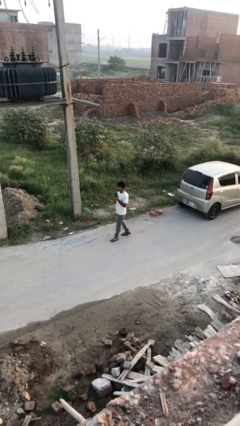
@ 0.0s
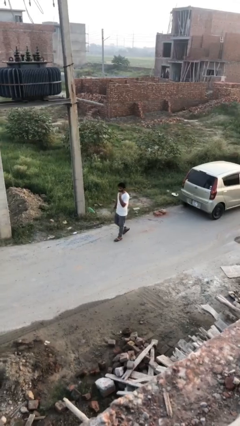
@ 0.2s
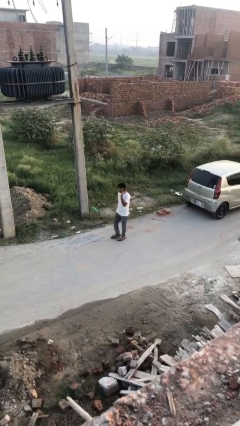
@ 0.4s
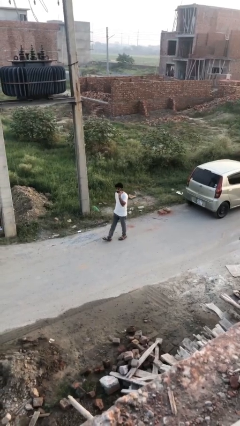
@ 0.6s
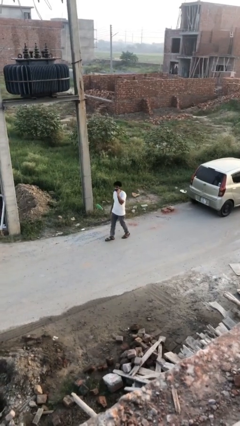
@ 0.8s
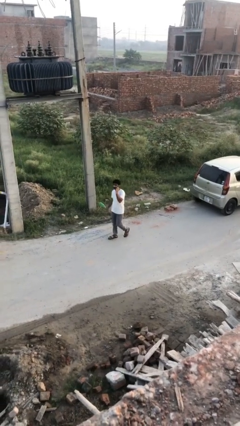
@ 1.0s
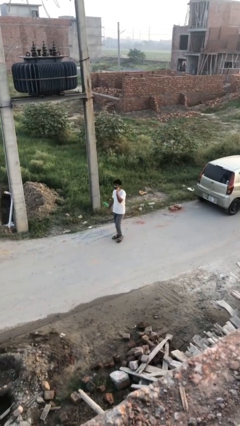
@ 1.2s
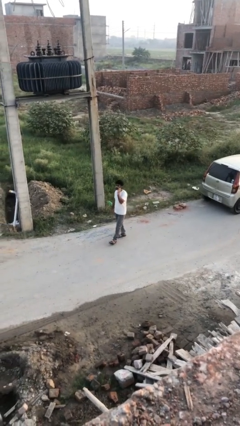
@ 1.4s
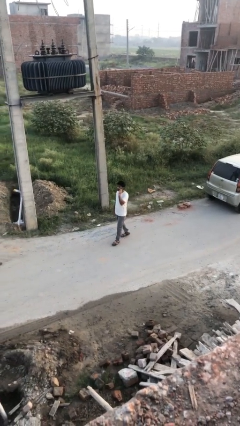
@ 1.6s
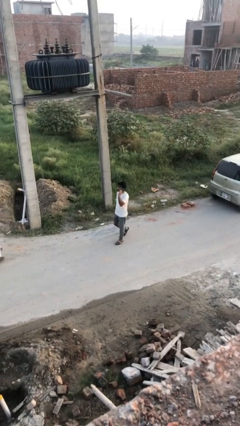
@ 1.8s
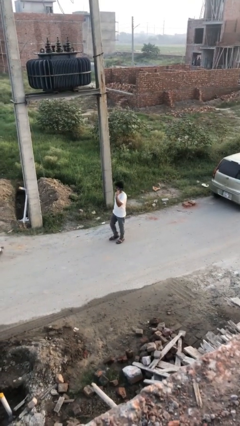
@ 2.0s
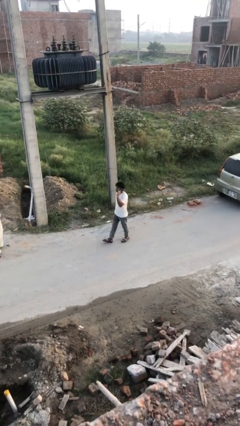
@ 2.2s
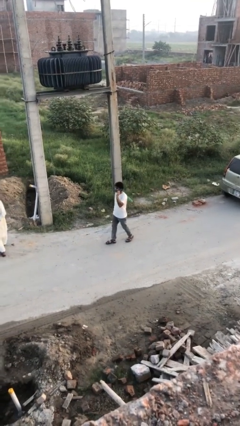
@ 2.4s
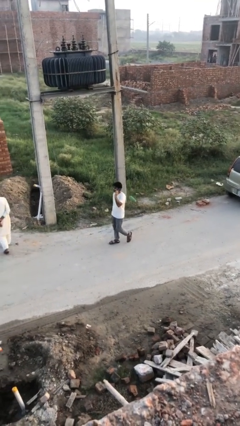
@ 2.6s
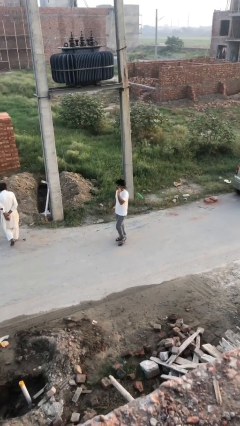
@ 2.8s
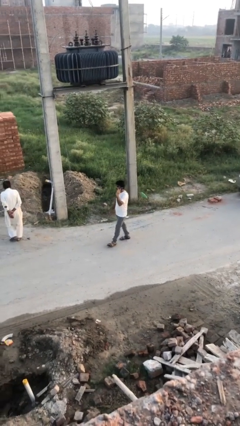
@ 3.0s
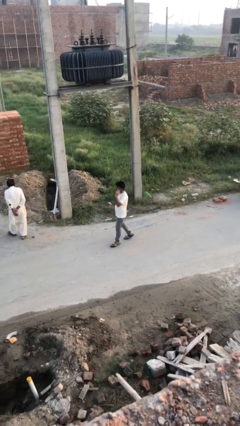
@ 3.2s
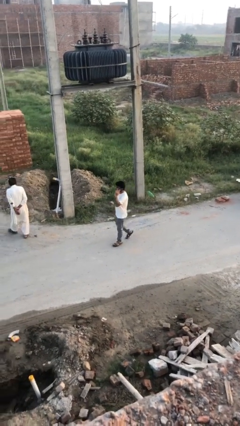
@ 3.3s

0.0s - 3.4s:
person talks on phone

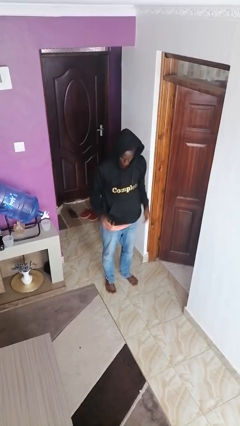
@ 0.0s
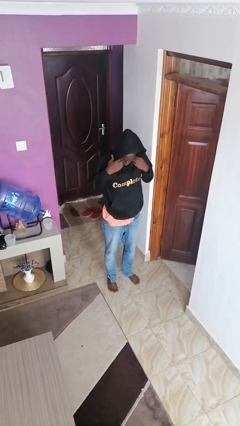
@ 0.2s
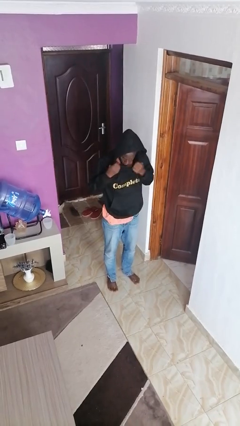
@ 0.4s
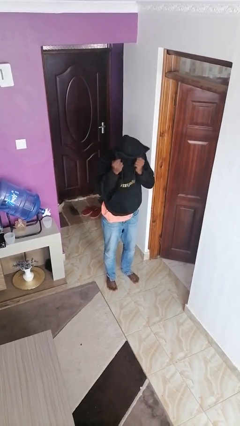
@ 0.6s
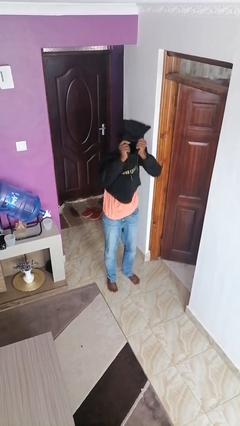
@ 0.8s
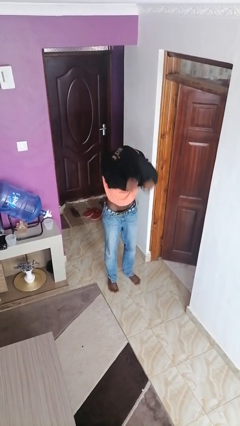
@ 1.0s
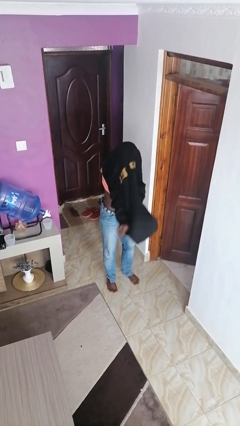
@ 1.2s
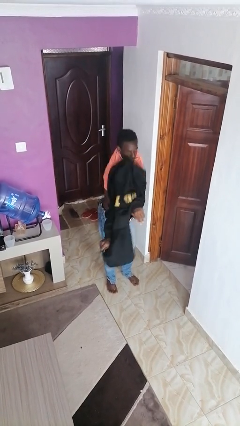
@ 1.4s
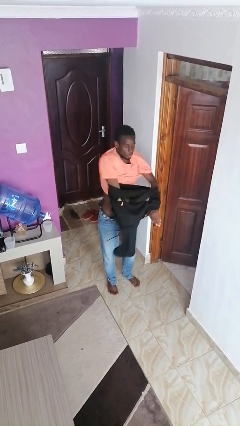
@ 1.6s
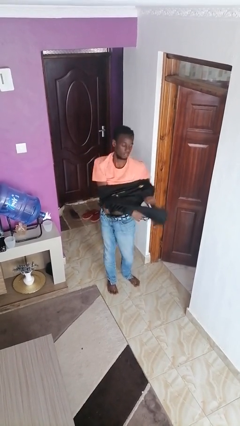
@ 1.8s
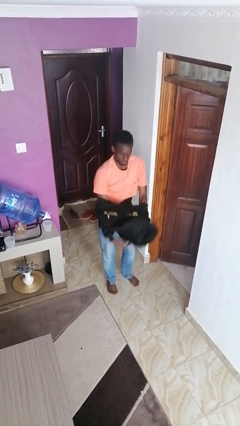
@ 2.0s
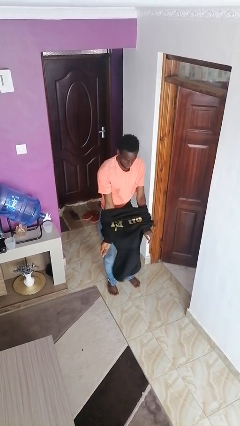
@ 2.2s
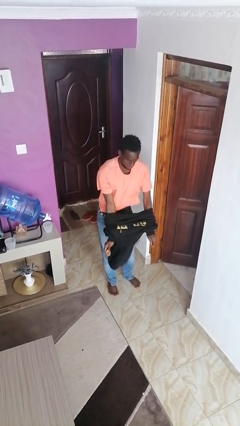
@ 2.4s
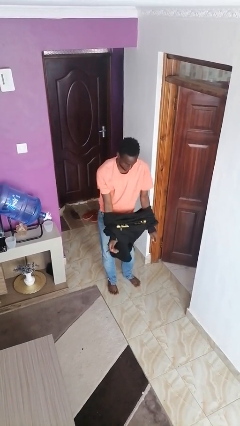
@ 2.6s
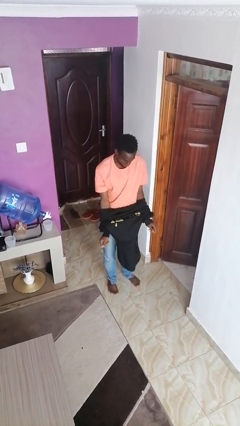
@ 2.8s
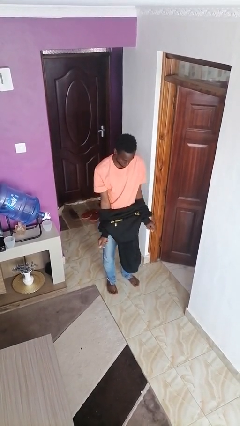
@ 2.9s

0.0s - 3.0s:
person takes off hoodie

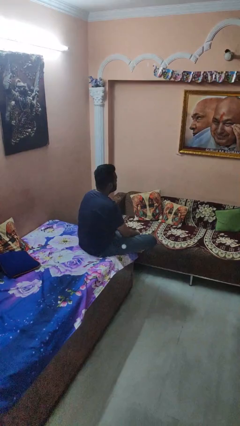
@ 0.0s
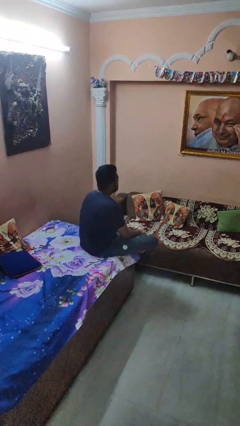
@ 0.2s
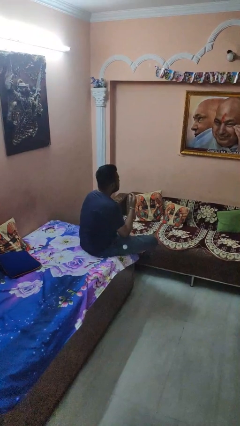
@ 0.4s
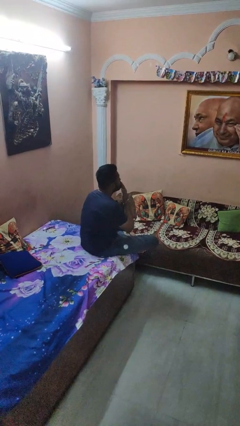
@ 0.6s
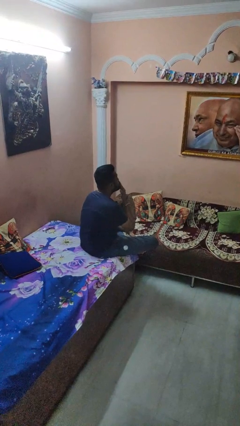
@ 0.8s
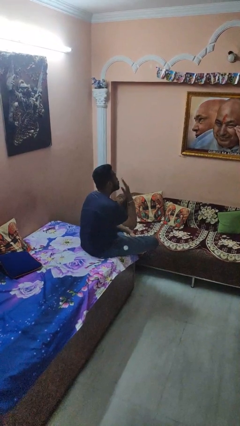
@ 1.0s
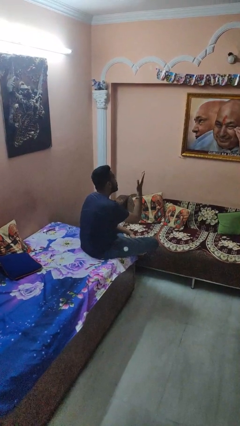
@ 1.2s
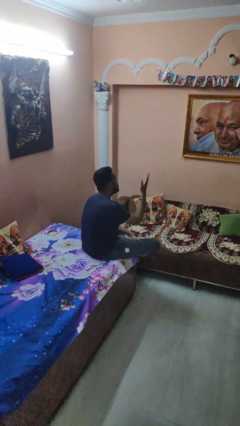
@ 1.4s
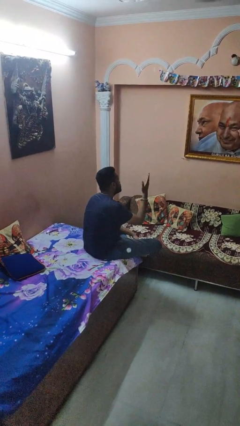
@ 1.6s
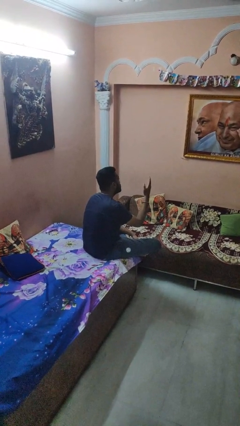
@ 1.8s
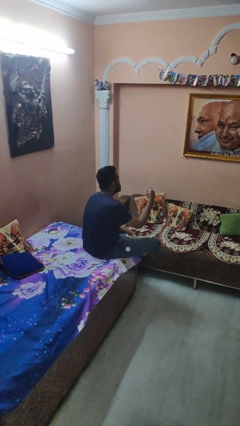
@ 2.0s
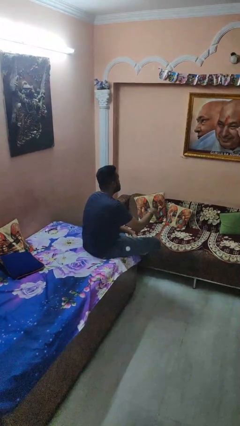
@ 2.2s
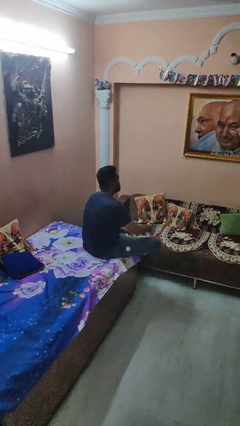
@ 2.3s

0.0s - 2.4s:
person gestures blow kiss

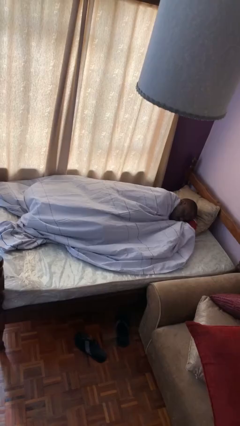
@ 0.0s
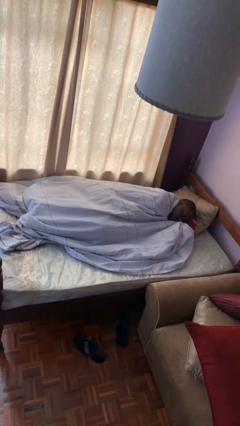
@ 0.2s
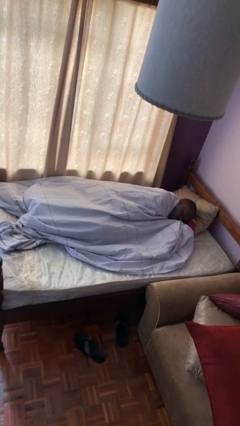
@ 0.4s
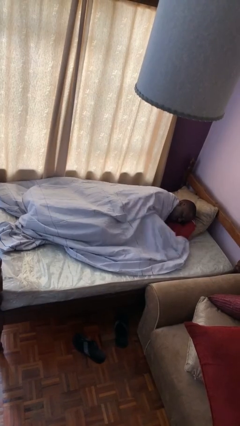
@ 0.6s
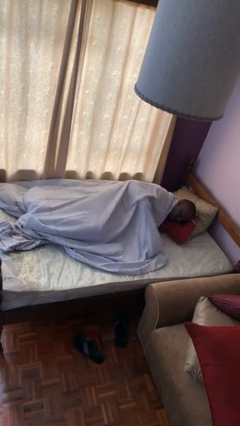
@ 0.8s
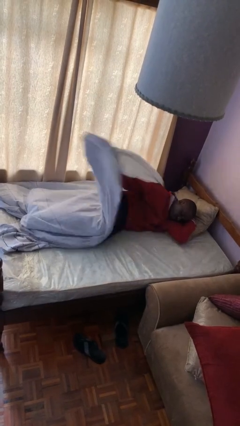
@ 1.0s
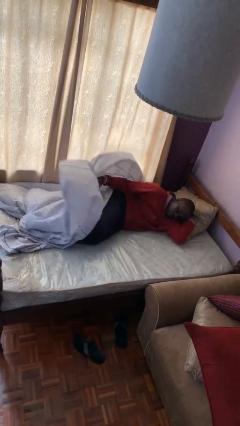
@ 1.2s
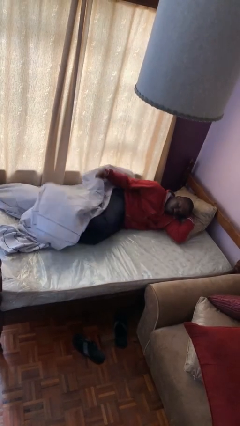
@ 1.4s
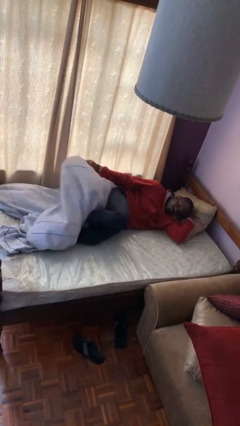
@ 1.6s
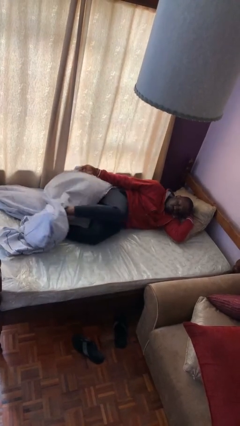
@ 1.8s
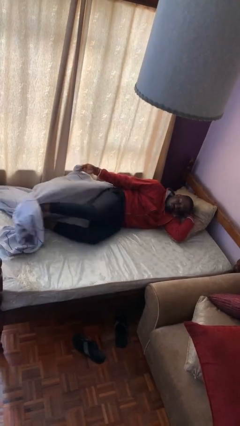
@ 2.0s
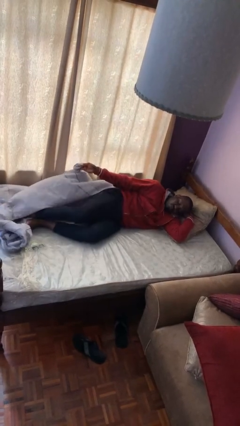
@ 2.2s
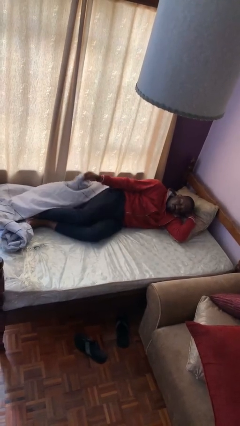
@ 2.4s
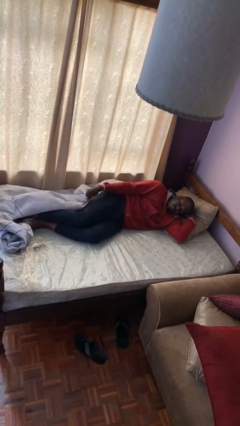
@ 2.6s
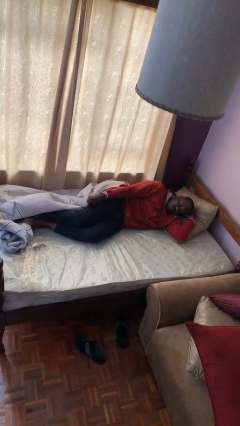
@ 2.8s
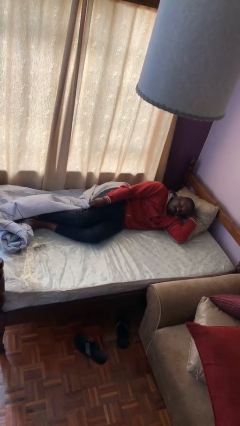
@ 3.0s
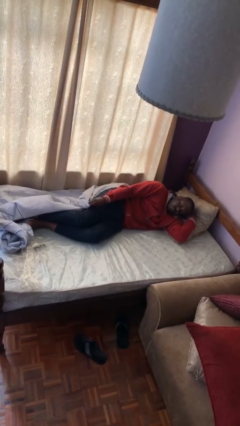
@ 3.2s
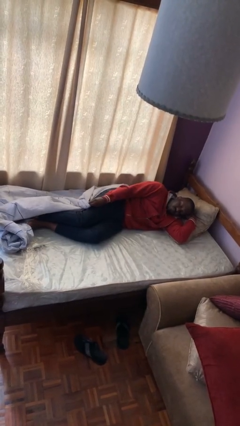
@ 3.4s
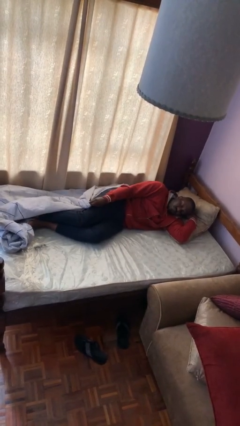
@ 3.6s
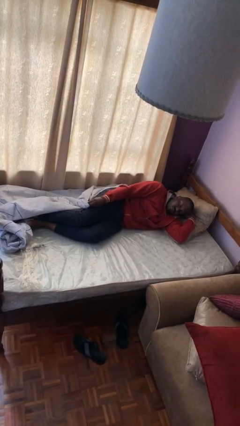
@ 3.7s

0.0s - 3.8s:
person uncovers with bedsheets

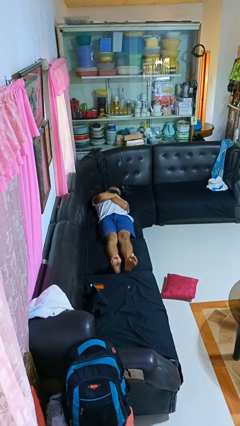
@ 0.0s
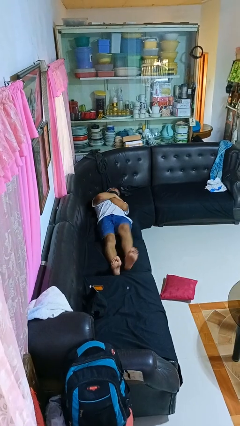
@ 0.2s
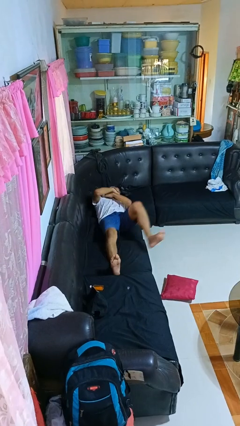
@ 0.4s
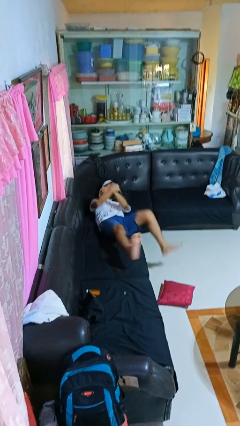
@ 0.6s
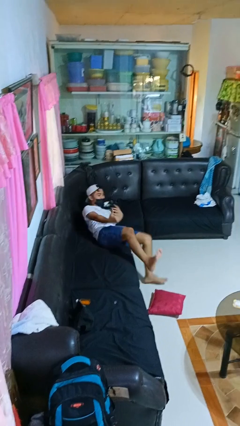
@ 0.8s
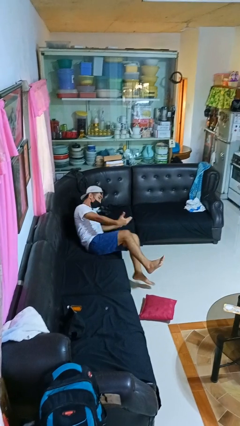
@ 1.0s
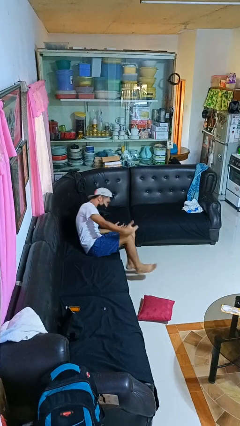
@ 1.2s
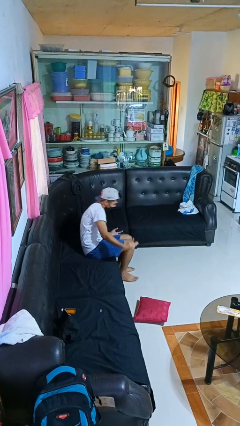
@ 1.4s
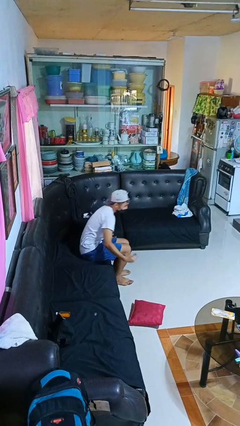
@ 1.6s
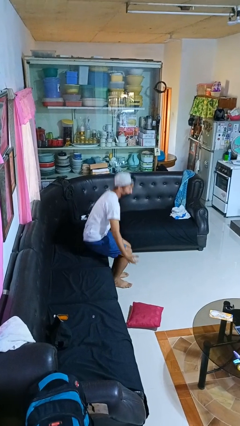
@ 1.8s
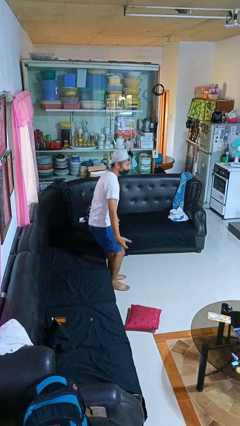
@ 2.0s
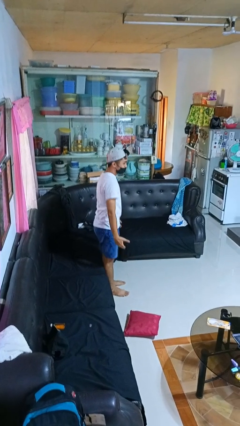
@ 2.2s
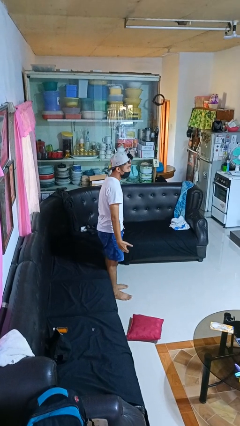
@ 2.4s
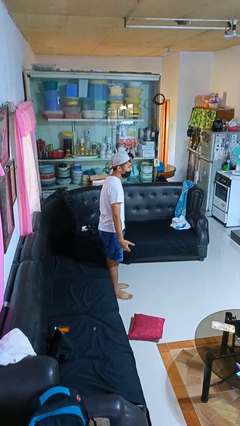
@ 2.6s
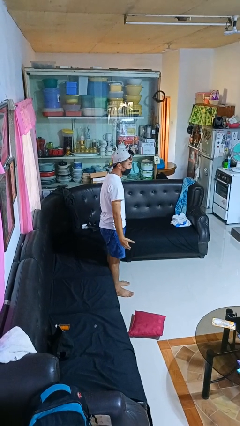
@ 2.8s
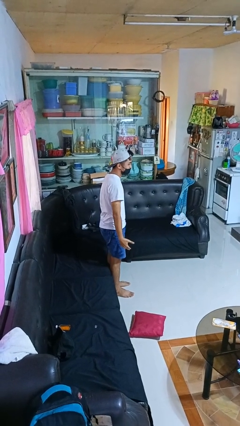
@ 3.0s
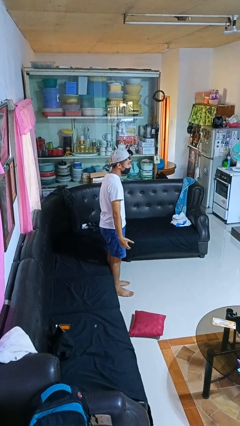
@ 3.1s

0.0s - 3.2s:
person stands up

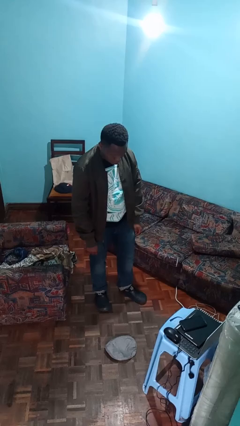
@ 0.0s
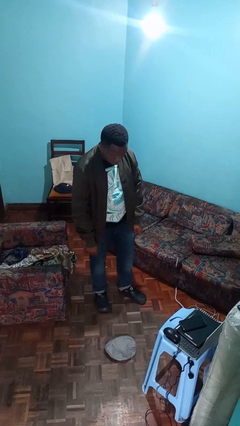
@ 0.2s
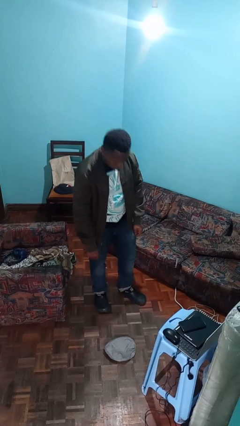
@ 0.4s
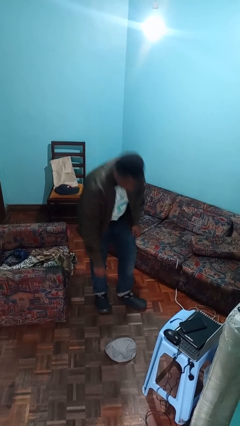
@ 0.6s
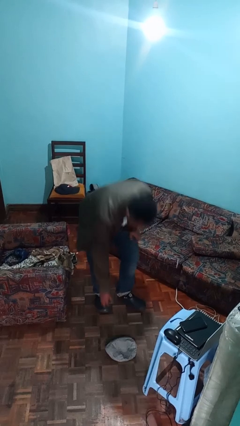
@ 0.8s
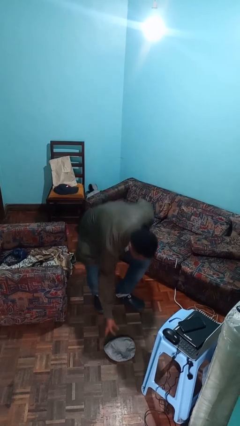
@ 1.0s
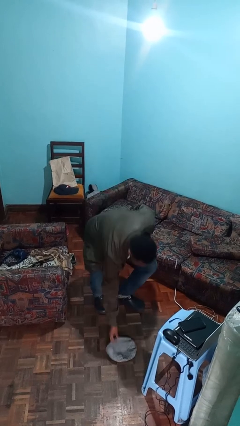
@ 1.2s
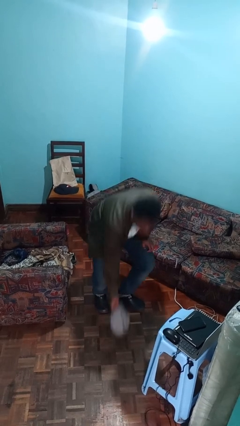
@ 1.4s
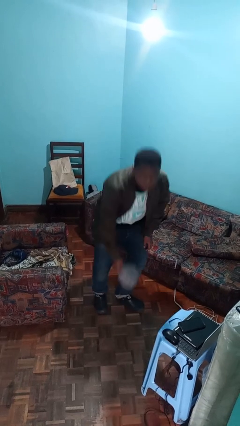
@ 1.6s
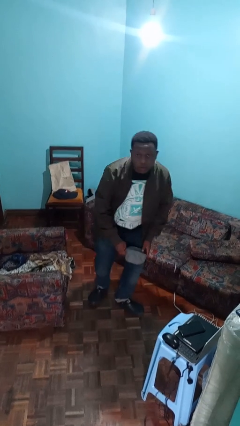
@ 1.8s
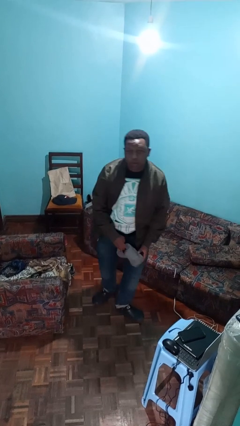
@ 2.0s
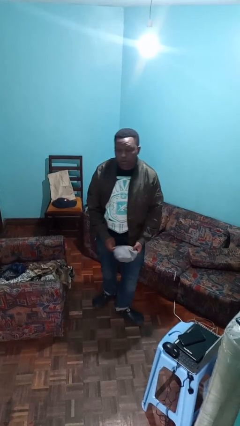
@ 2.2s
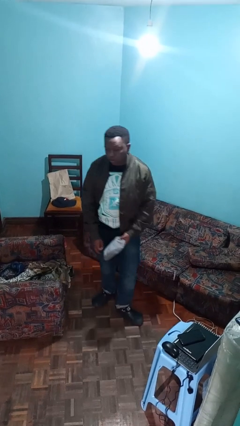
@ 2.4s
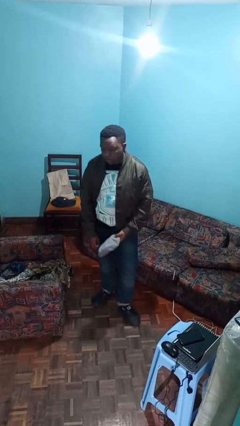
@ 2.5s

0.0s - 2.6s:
person picks up object from floor
